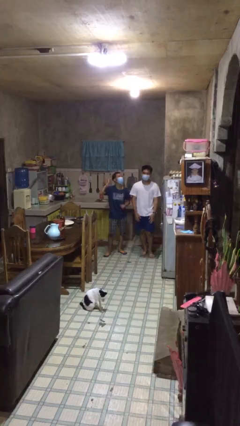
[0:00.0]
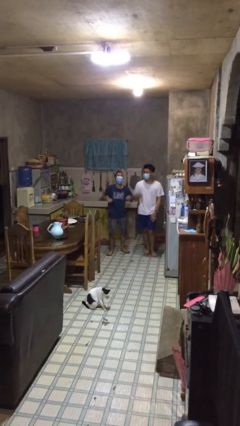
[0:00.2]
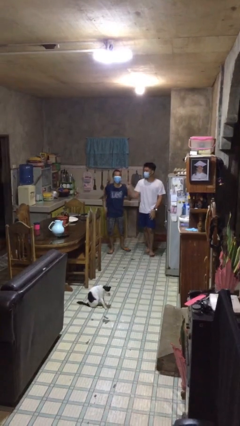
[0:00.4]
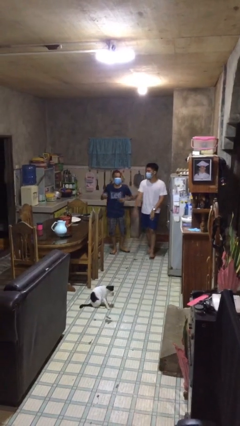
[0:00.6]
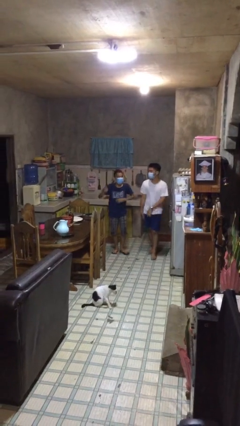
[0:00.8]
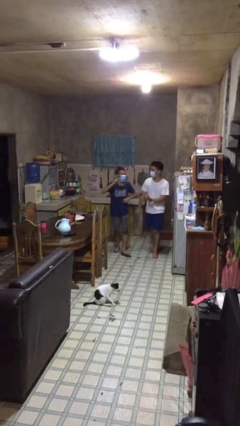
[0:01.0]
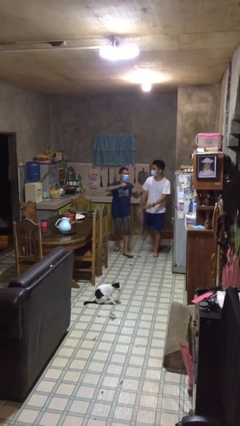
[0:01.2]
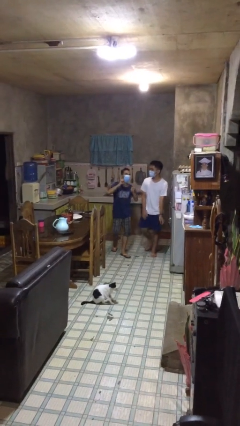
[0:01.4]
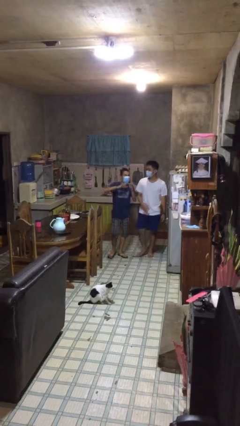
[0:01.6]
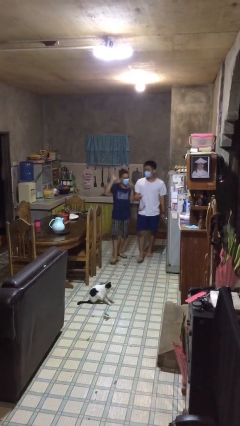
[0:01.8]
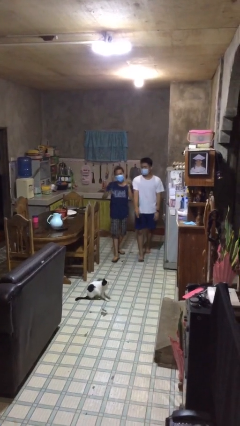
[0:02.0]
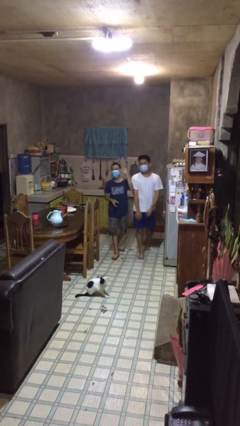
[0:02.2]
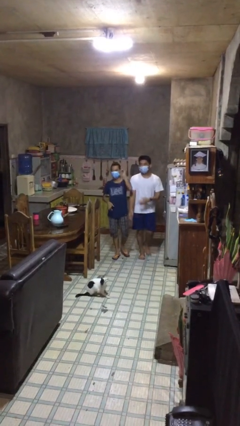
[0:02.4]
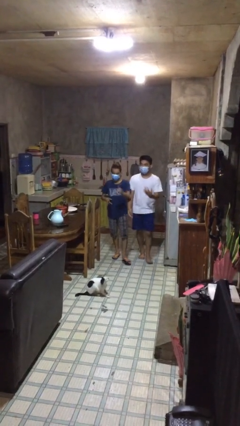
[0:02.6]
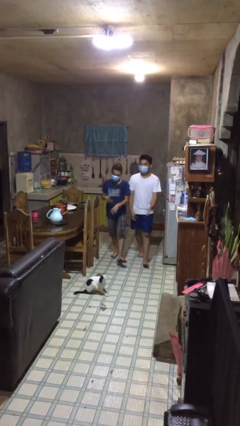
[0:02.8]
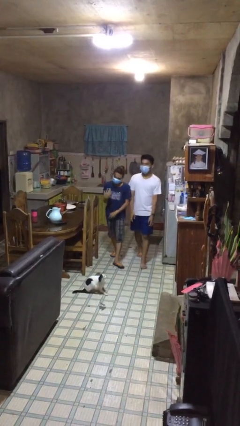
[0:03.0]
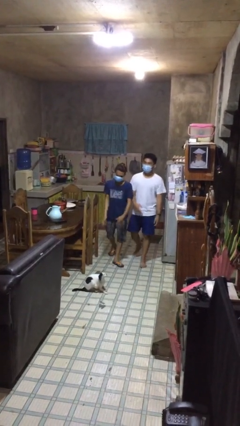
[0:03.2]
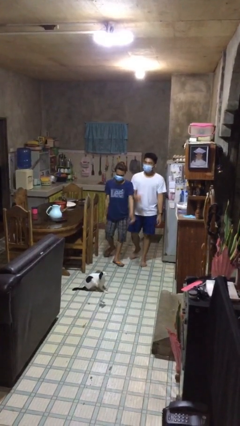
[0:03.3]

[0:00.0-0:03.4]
person talks to person

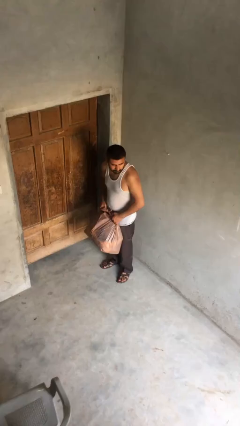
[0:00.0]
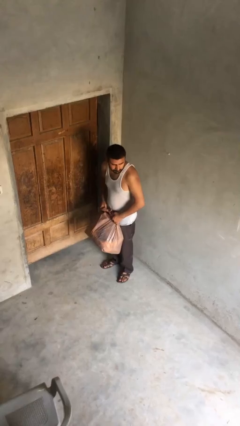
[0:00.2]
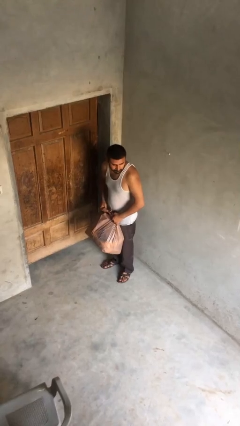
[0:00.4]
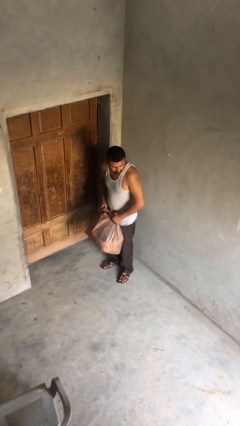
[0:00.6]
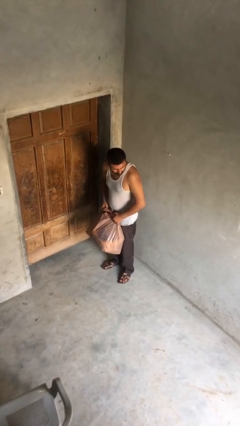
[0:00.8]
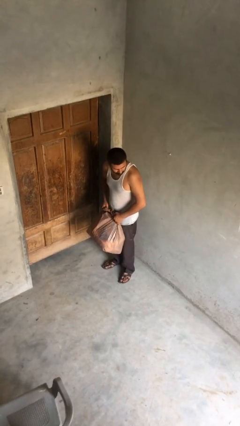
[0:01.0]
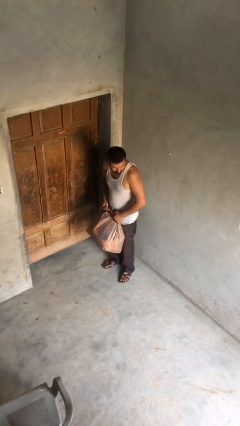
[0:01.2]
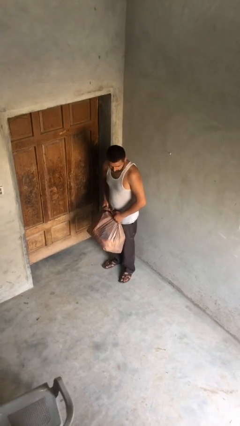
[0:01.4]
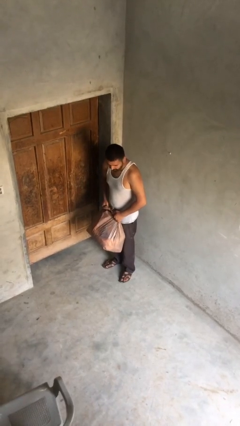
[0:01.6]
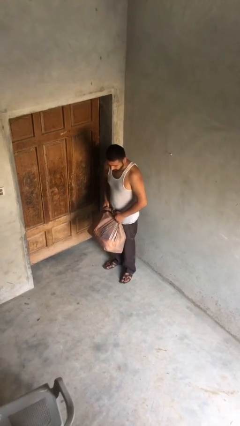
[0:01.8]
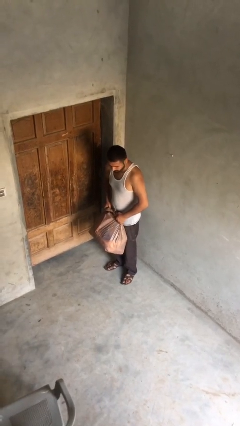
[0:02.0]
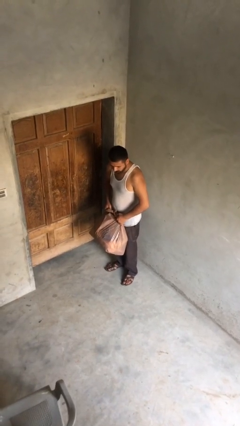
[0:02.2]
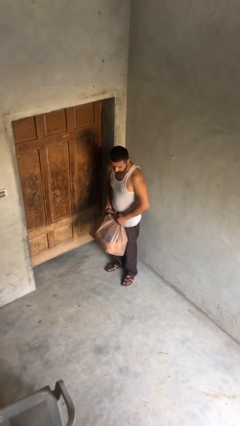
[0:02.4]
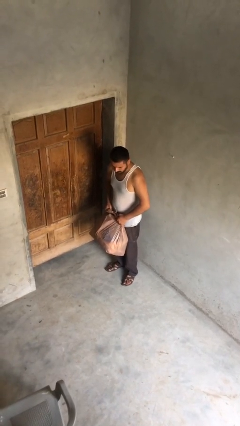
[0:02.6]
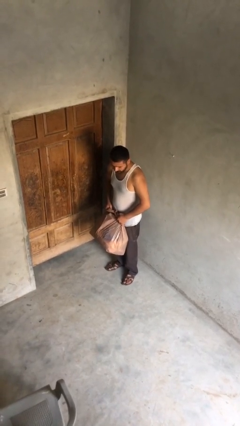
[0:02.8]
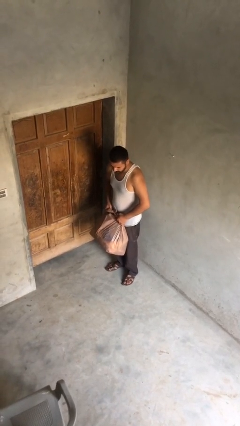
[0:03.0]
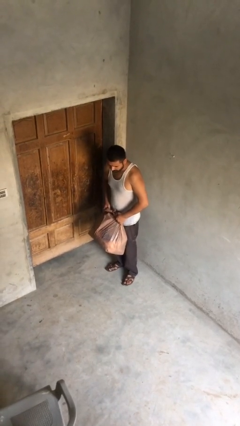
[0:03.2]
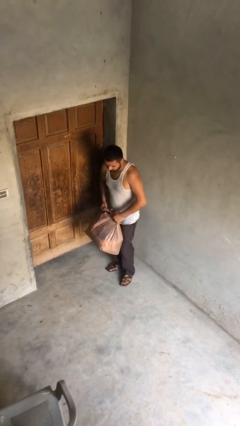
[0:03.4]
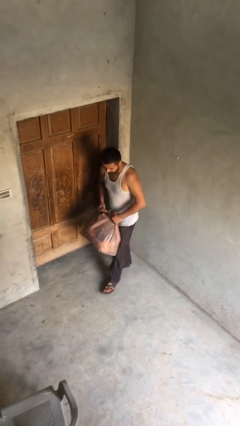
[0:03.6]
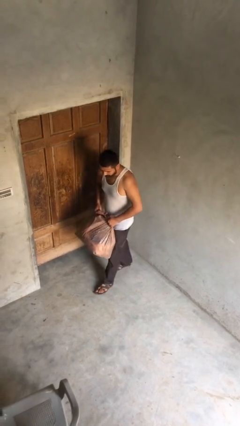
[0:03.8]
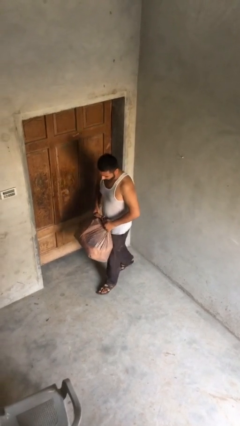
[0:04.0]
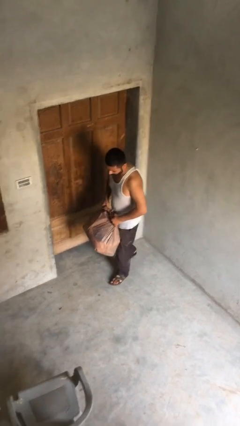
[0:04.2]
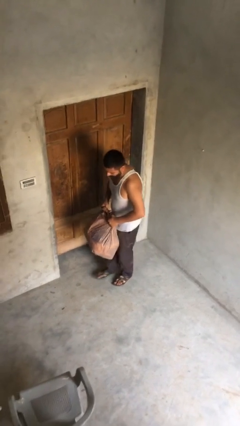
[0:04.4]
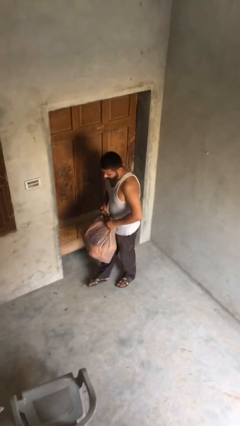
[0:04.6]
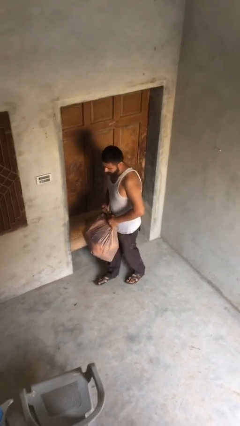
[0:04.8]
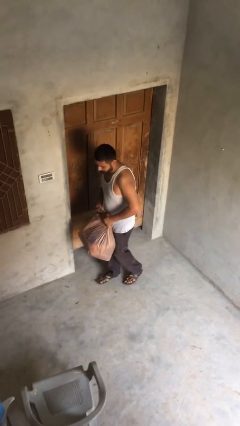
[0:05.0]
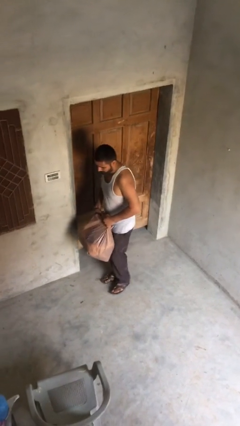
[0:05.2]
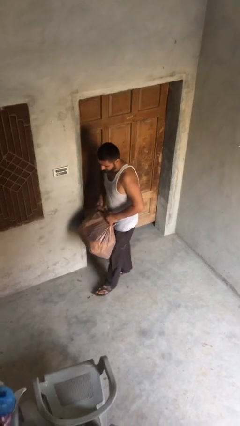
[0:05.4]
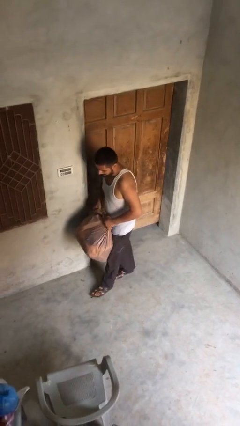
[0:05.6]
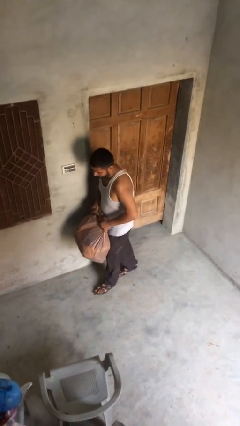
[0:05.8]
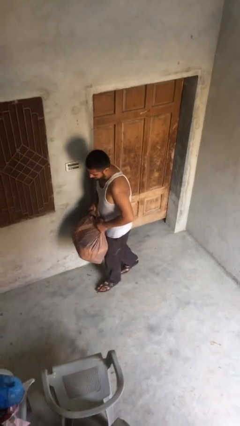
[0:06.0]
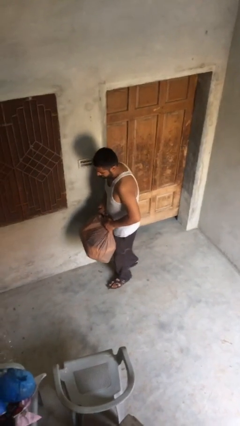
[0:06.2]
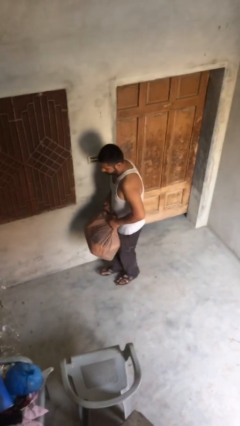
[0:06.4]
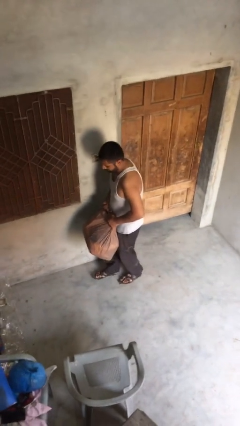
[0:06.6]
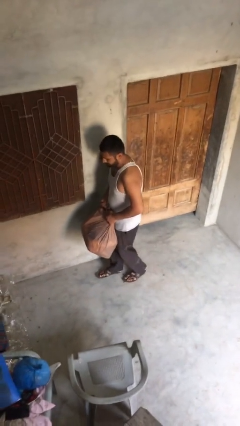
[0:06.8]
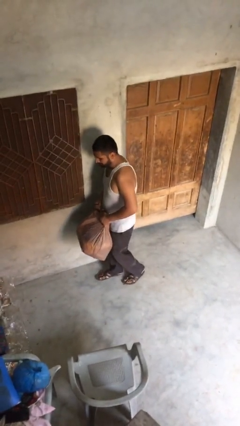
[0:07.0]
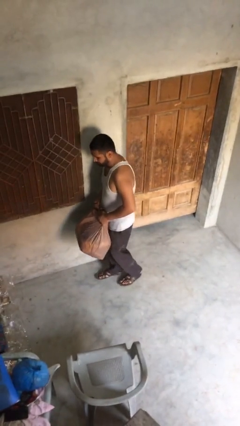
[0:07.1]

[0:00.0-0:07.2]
person carries heavy object

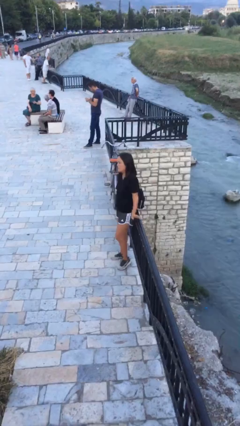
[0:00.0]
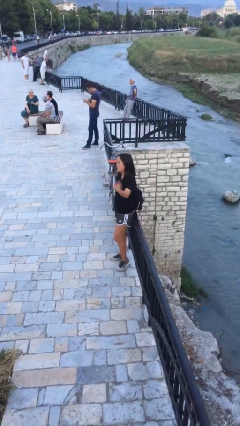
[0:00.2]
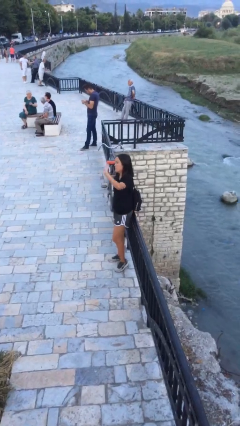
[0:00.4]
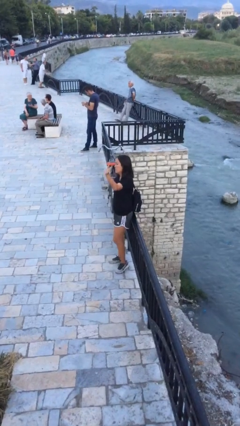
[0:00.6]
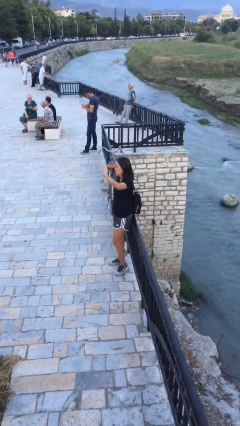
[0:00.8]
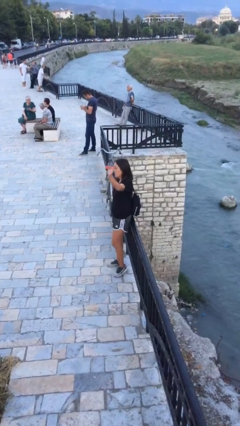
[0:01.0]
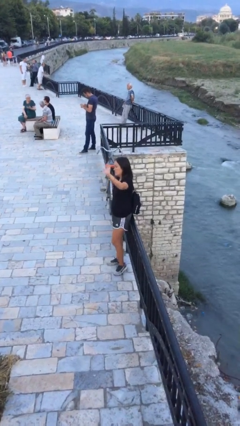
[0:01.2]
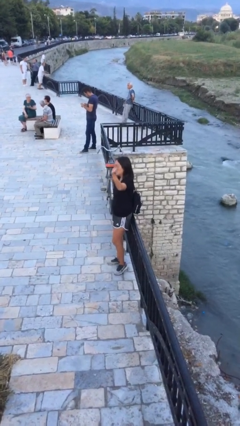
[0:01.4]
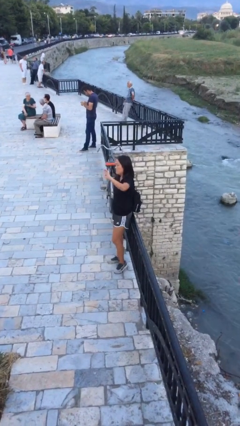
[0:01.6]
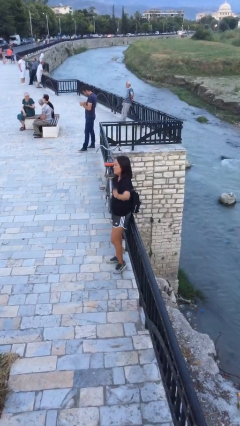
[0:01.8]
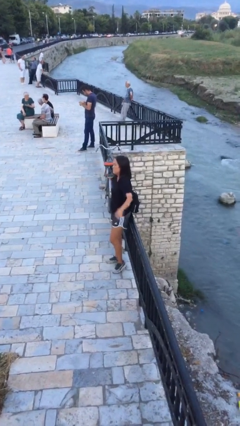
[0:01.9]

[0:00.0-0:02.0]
person waves at person

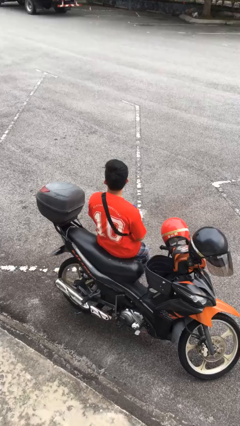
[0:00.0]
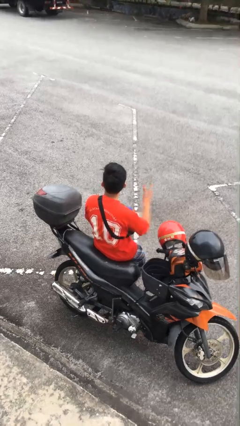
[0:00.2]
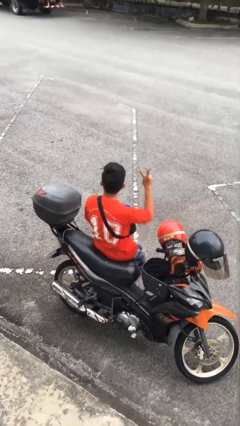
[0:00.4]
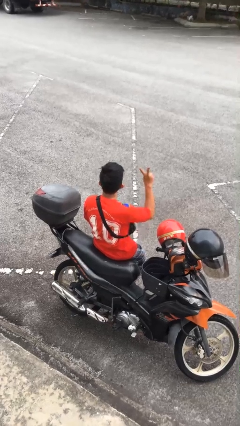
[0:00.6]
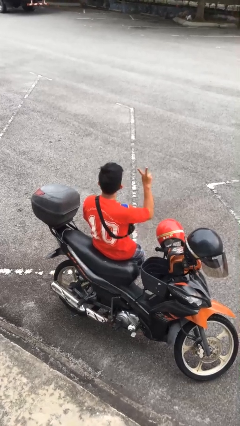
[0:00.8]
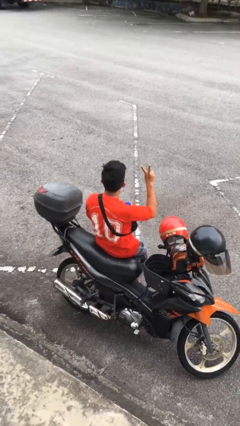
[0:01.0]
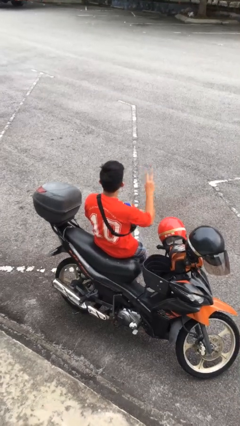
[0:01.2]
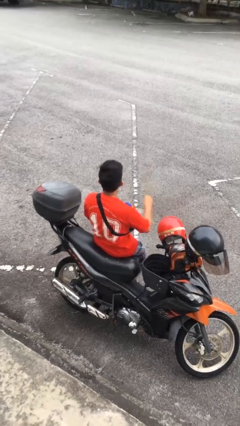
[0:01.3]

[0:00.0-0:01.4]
person gestures peace

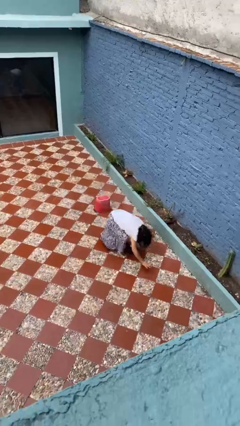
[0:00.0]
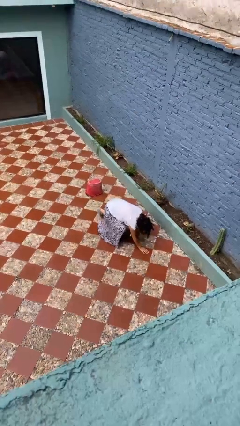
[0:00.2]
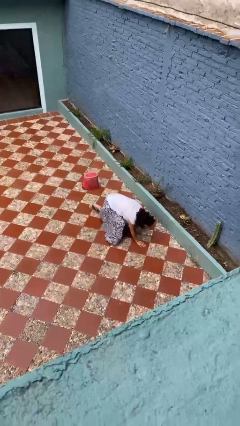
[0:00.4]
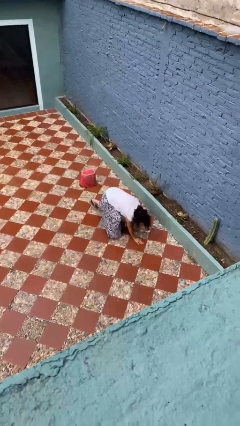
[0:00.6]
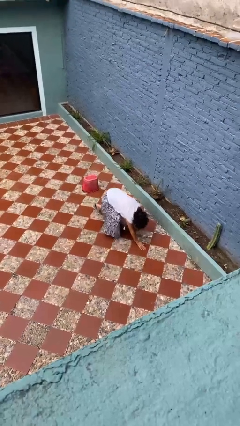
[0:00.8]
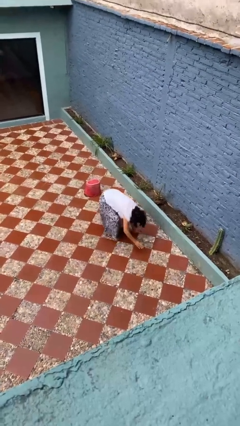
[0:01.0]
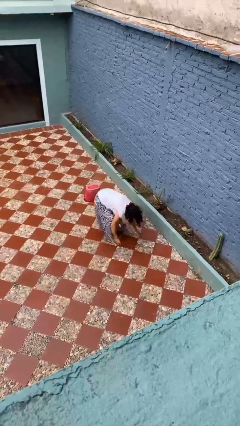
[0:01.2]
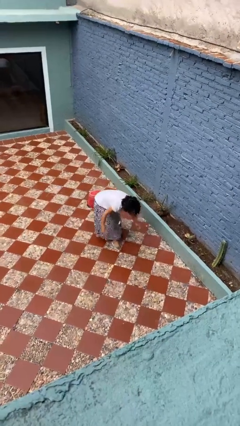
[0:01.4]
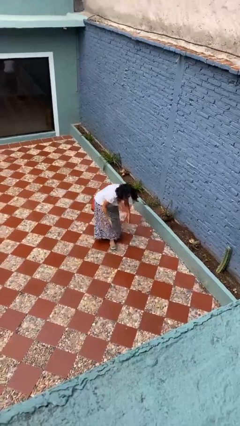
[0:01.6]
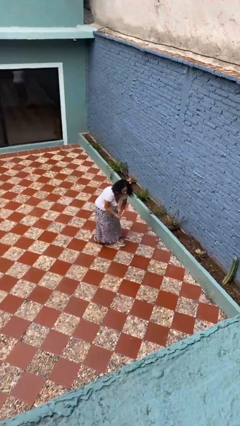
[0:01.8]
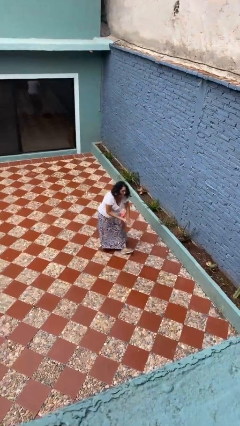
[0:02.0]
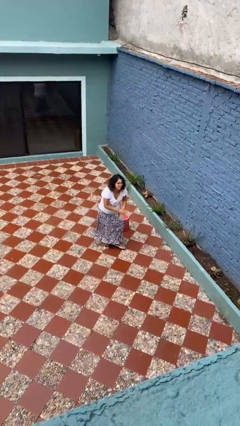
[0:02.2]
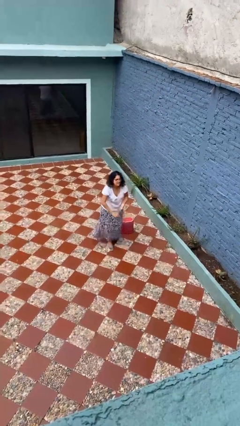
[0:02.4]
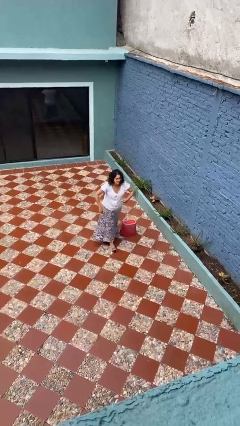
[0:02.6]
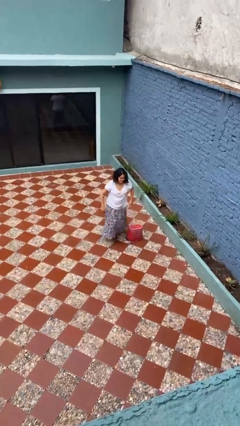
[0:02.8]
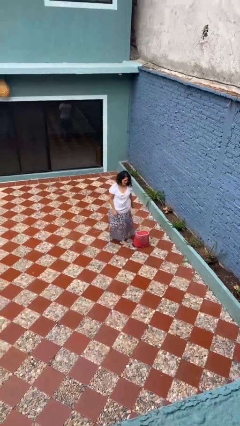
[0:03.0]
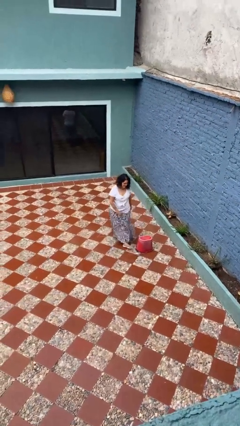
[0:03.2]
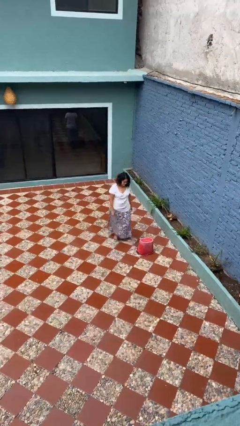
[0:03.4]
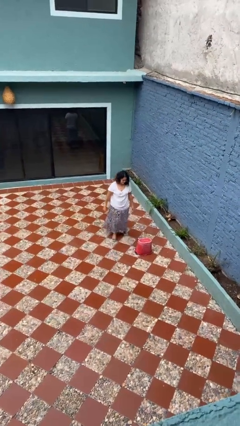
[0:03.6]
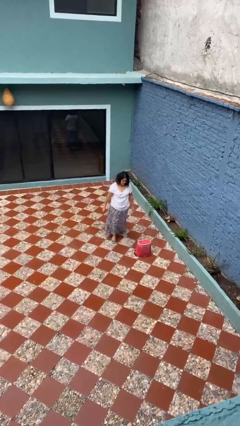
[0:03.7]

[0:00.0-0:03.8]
person stands up from floor
